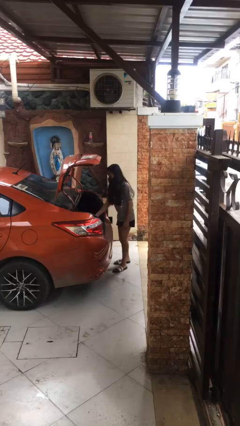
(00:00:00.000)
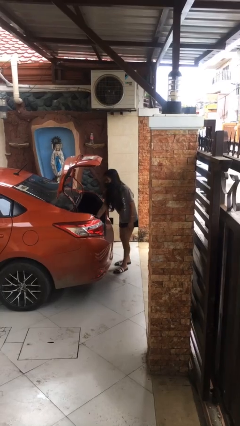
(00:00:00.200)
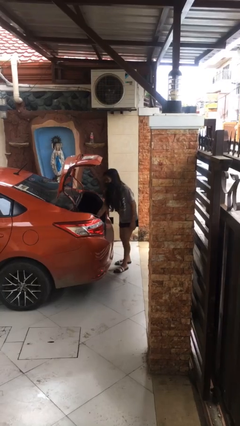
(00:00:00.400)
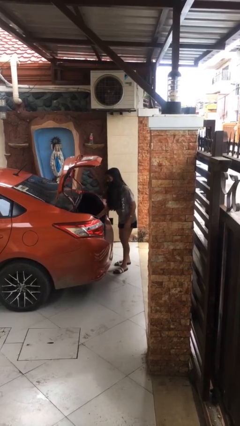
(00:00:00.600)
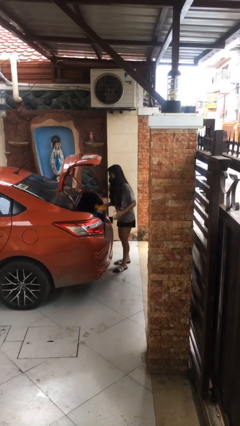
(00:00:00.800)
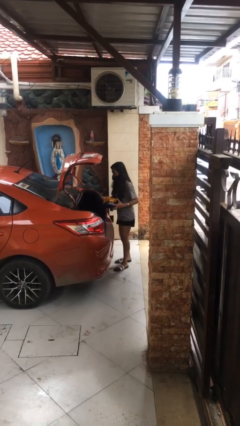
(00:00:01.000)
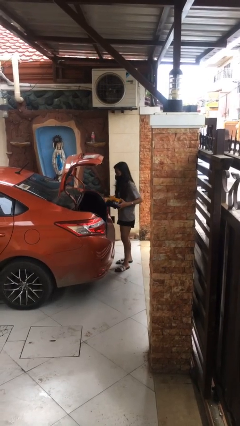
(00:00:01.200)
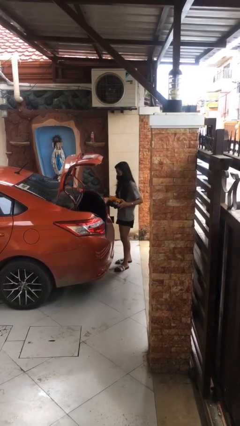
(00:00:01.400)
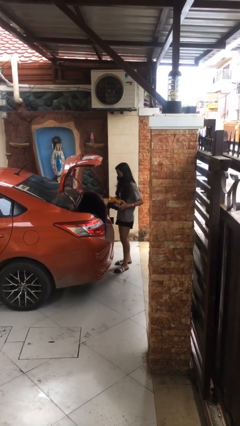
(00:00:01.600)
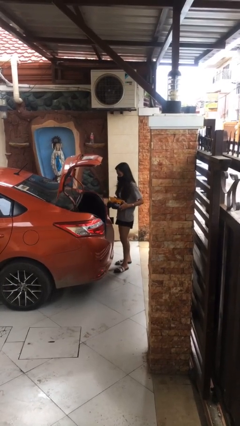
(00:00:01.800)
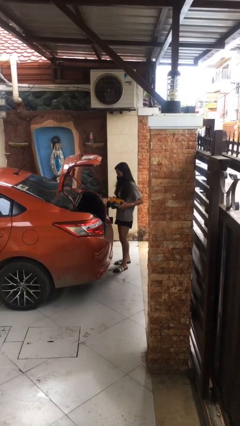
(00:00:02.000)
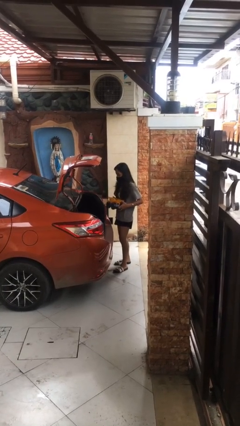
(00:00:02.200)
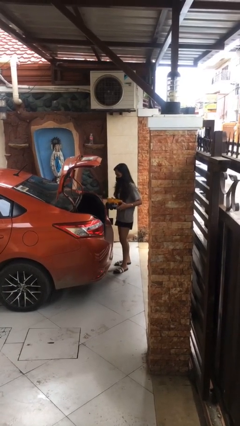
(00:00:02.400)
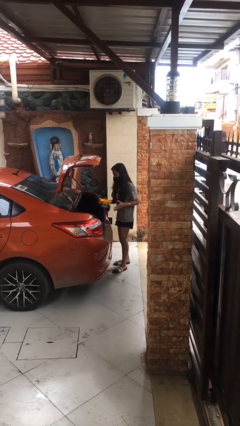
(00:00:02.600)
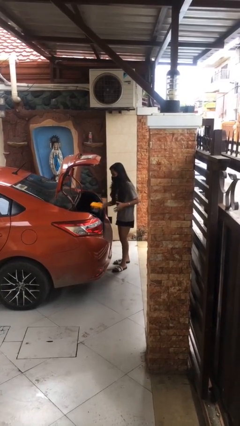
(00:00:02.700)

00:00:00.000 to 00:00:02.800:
person unloads car

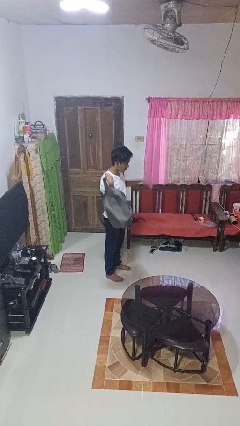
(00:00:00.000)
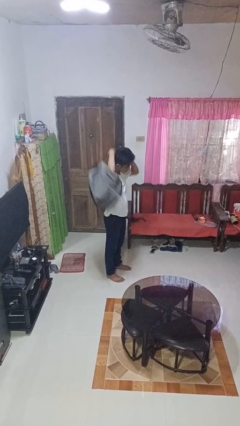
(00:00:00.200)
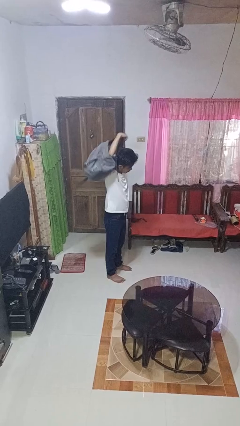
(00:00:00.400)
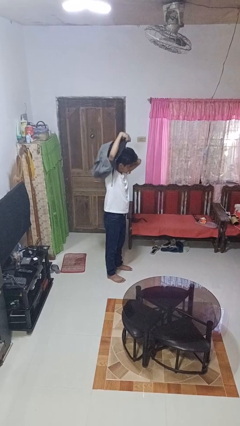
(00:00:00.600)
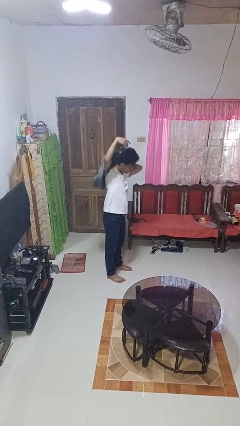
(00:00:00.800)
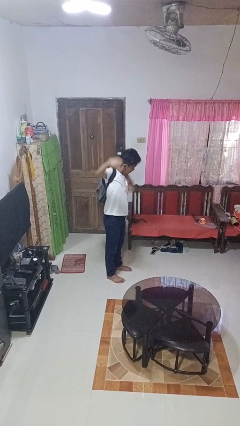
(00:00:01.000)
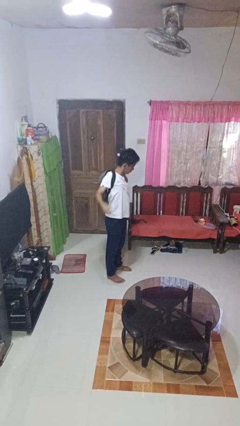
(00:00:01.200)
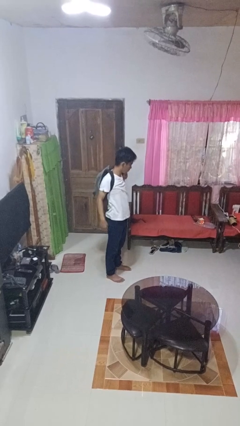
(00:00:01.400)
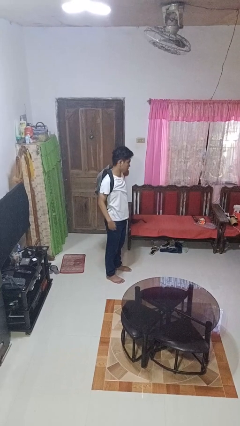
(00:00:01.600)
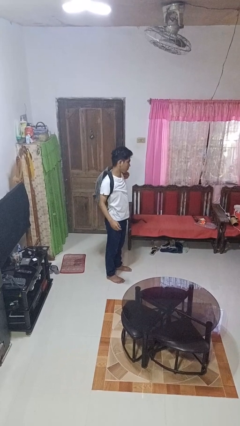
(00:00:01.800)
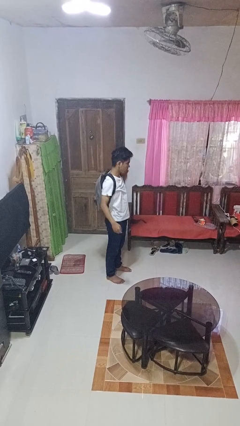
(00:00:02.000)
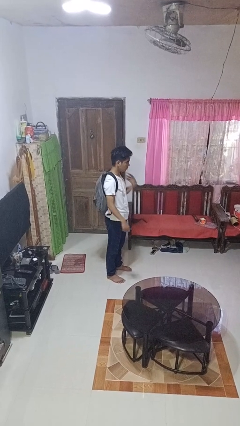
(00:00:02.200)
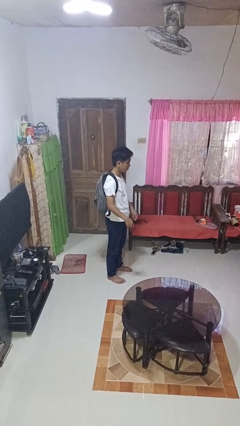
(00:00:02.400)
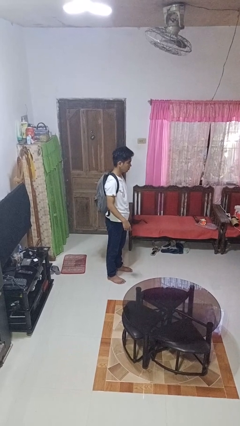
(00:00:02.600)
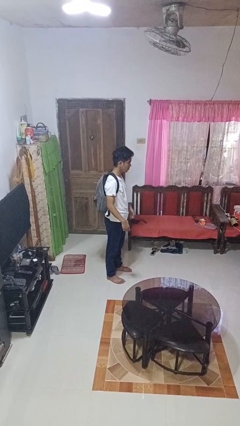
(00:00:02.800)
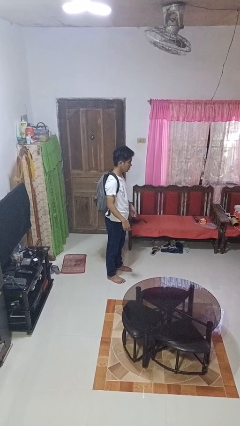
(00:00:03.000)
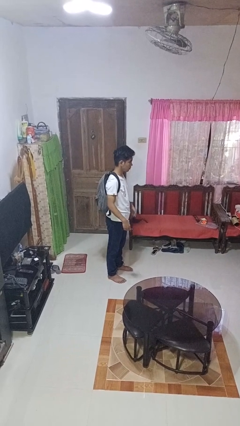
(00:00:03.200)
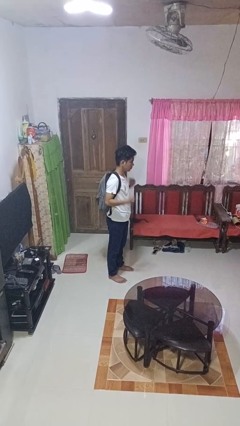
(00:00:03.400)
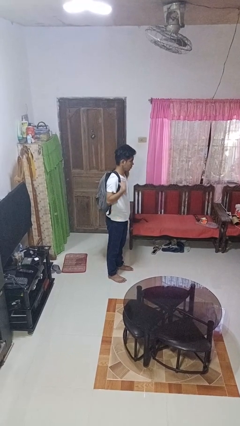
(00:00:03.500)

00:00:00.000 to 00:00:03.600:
person puts on backpack

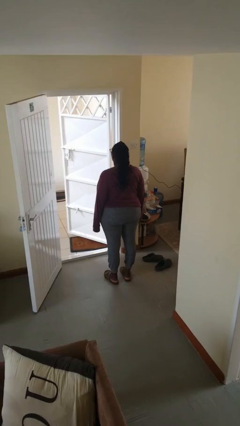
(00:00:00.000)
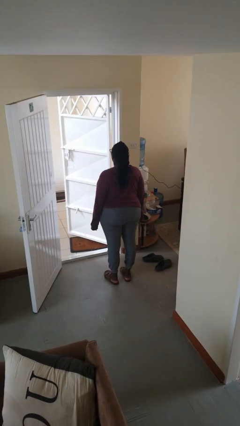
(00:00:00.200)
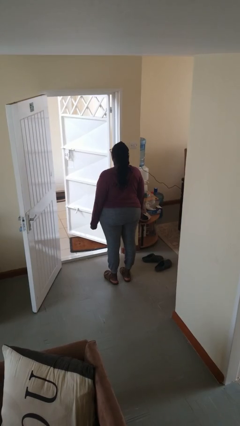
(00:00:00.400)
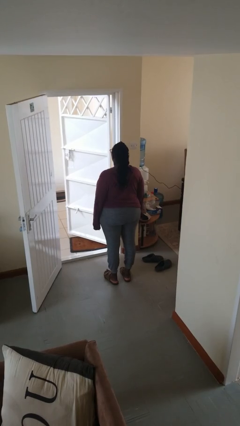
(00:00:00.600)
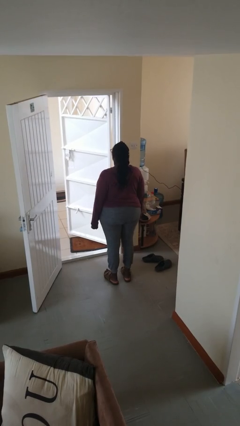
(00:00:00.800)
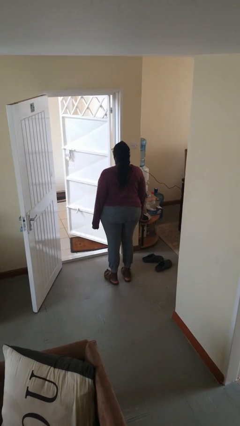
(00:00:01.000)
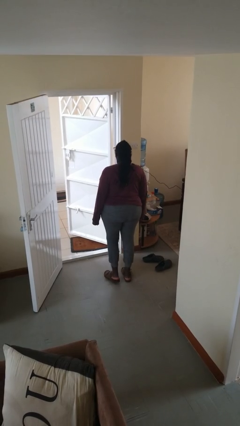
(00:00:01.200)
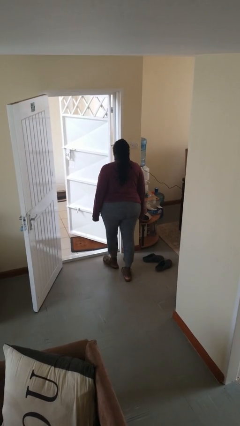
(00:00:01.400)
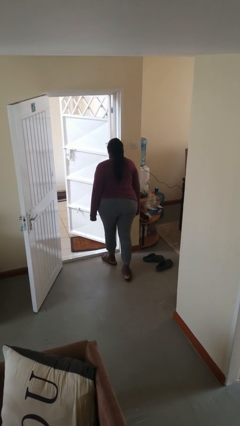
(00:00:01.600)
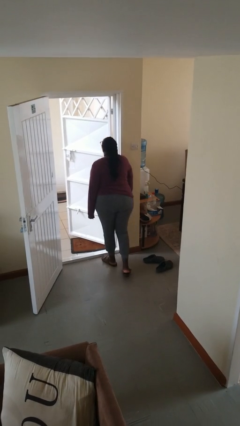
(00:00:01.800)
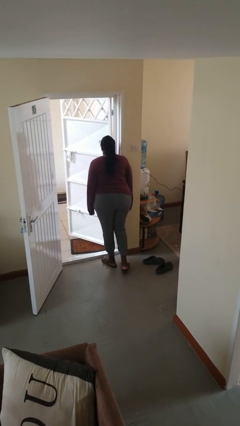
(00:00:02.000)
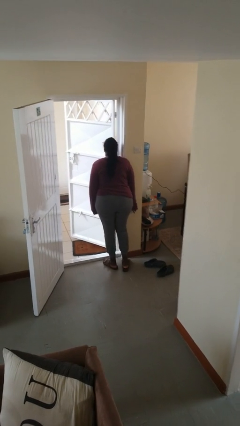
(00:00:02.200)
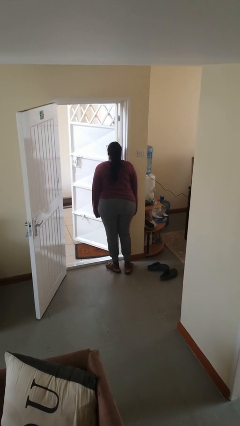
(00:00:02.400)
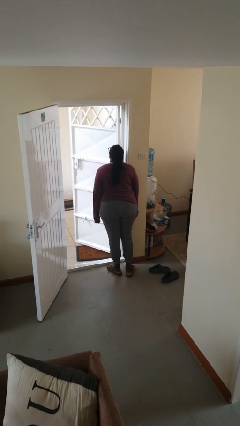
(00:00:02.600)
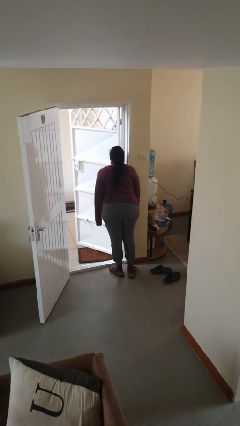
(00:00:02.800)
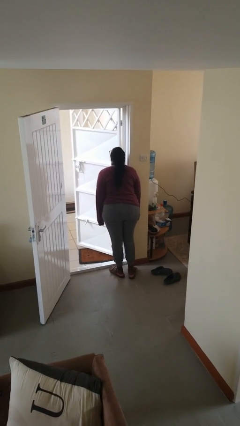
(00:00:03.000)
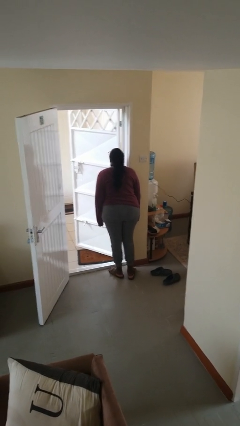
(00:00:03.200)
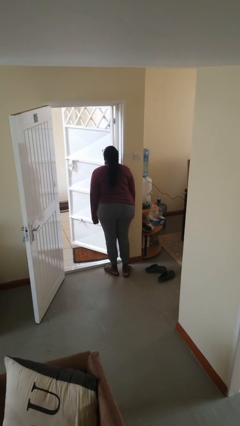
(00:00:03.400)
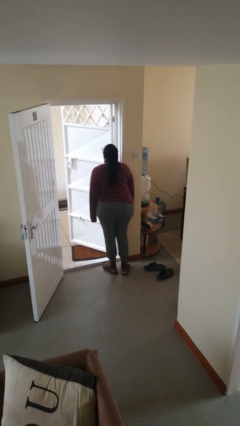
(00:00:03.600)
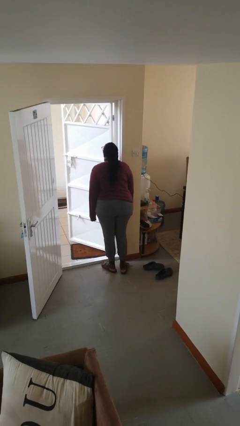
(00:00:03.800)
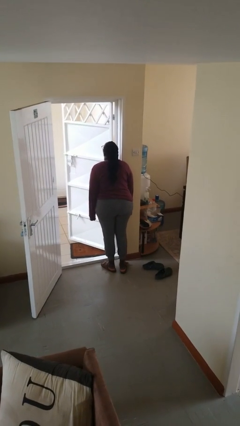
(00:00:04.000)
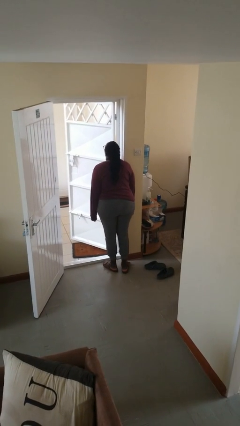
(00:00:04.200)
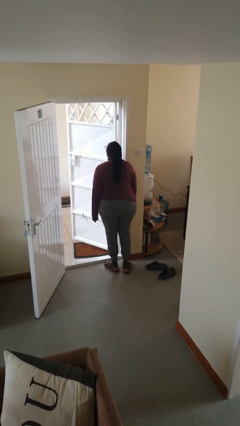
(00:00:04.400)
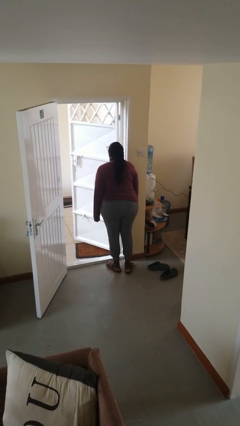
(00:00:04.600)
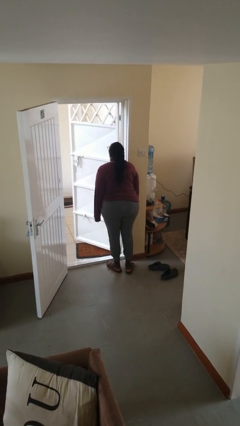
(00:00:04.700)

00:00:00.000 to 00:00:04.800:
person bumps into wall

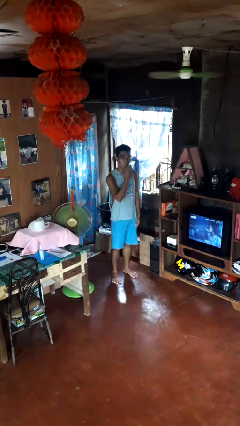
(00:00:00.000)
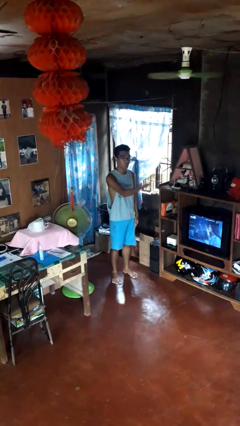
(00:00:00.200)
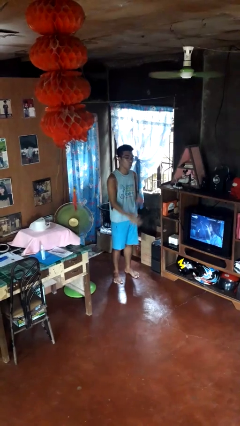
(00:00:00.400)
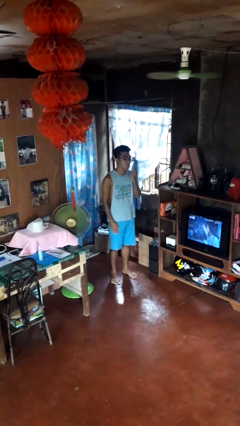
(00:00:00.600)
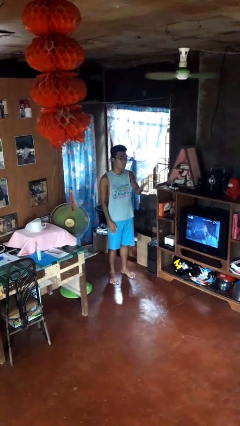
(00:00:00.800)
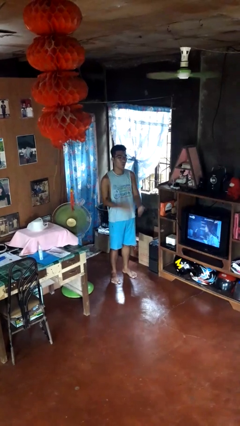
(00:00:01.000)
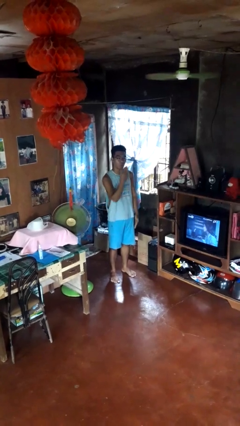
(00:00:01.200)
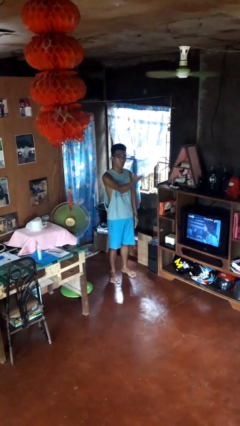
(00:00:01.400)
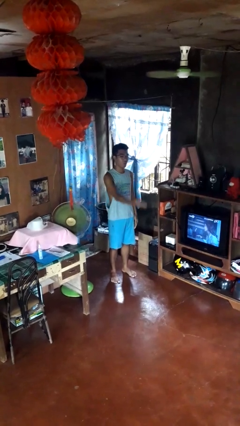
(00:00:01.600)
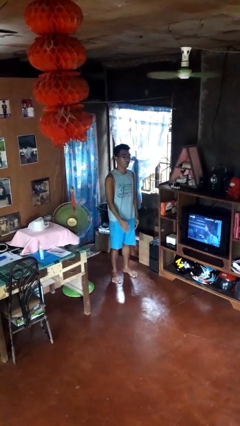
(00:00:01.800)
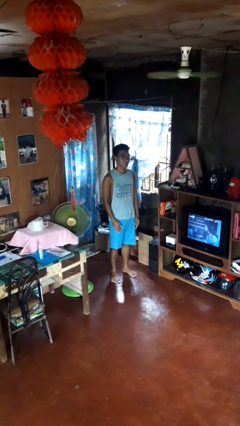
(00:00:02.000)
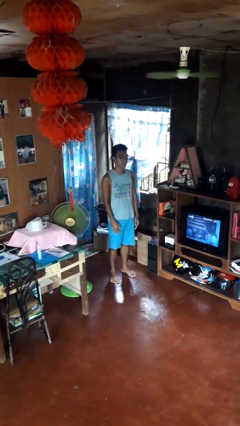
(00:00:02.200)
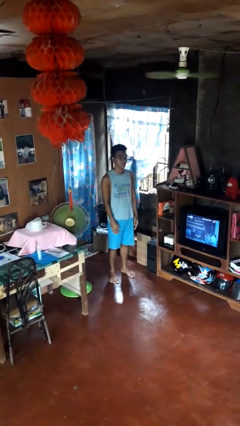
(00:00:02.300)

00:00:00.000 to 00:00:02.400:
person gestures blow kiss

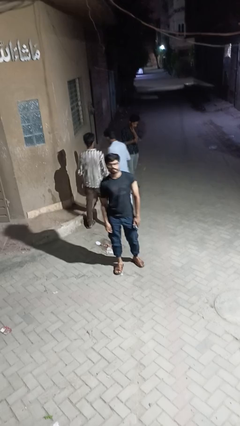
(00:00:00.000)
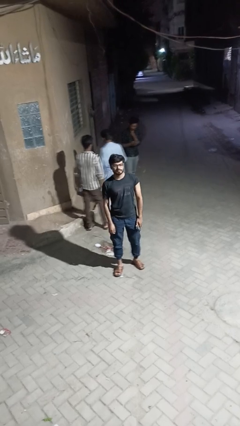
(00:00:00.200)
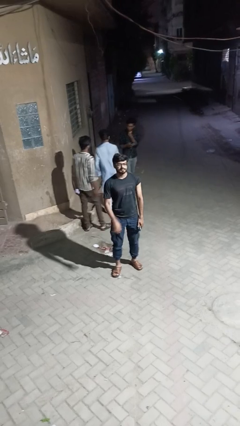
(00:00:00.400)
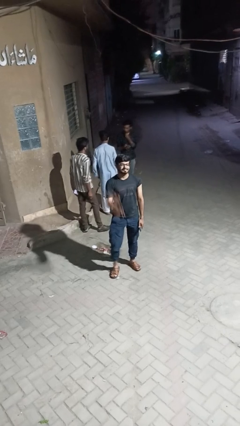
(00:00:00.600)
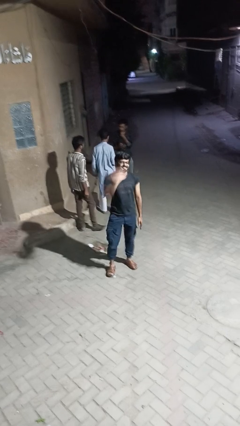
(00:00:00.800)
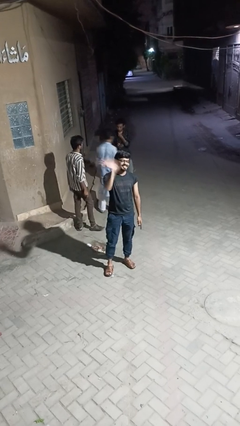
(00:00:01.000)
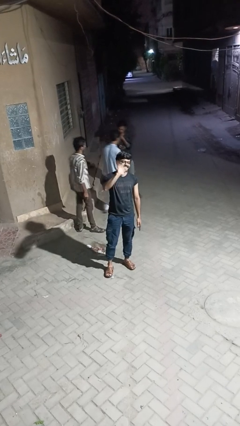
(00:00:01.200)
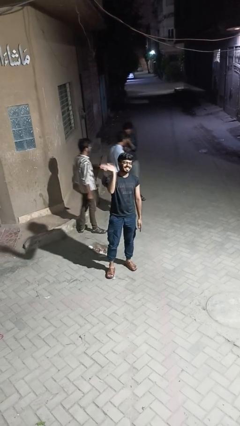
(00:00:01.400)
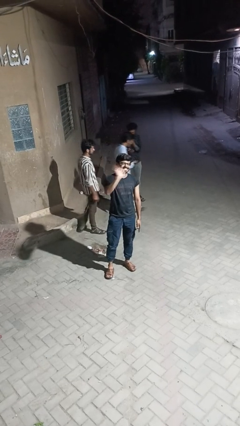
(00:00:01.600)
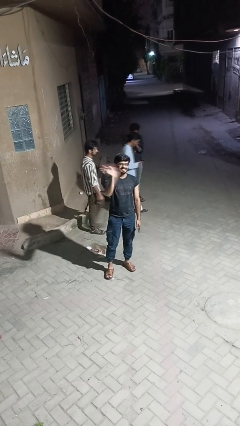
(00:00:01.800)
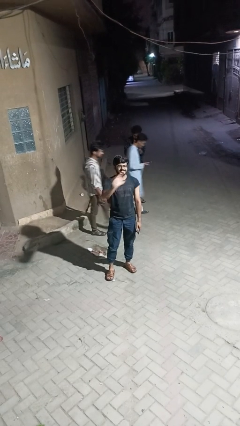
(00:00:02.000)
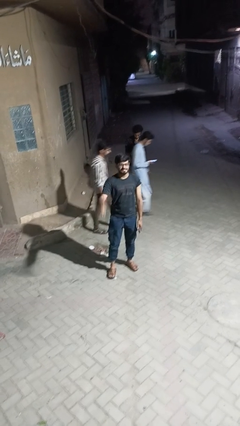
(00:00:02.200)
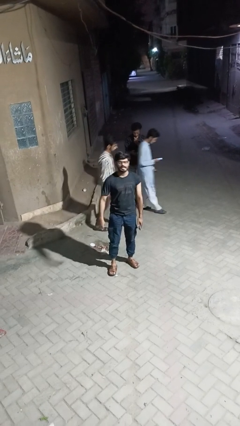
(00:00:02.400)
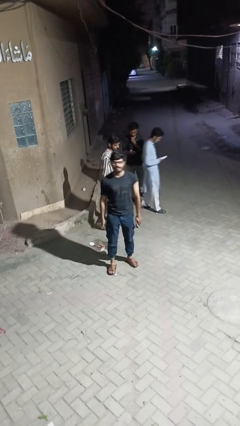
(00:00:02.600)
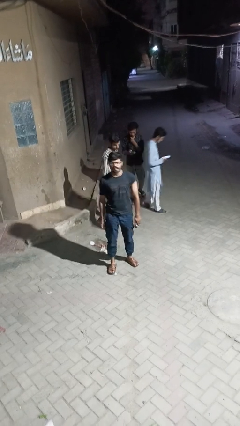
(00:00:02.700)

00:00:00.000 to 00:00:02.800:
person waves at person

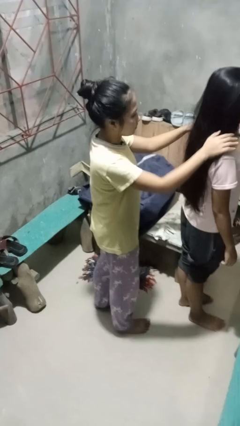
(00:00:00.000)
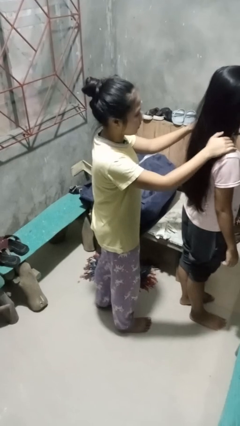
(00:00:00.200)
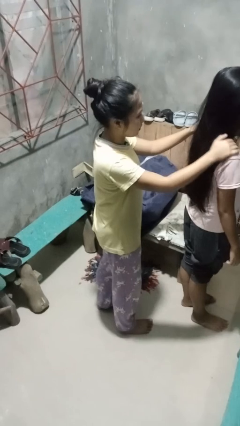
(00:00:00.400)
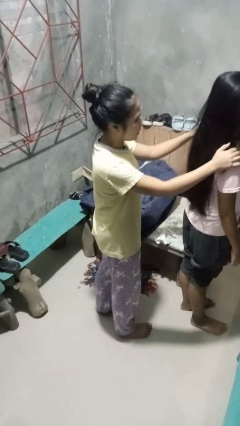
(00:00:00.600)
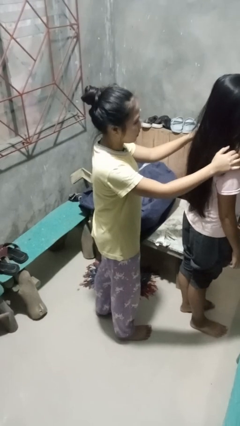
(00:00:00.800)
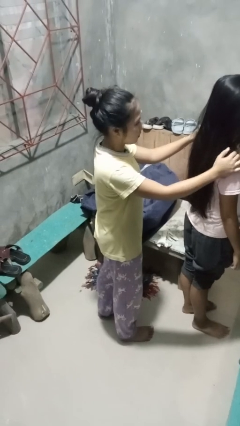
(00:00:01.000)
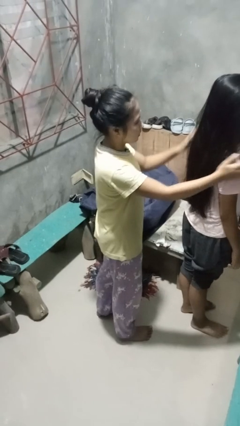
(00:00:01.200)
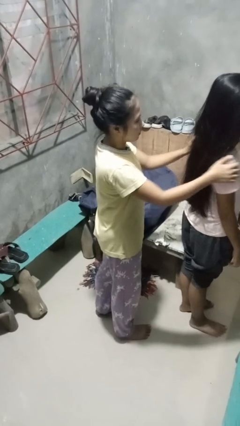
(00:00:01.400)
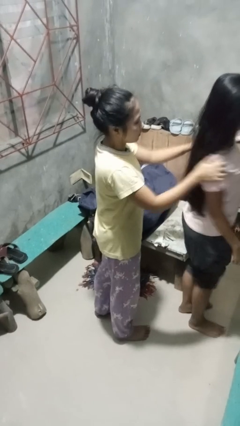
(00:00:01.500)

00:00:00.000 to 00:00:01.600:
person grabs person by shoulder
